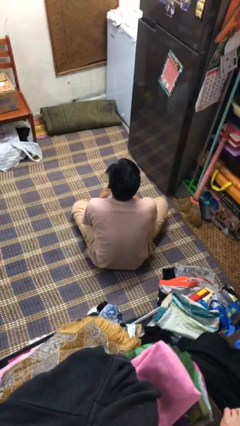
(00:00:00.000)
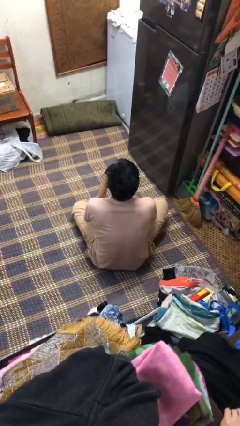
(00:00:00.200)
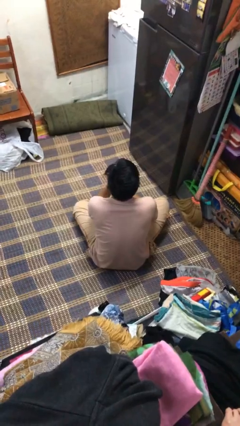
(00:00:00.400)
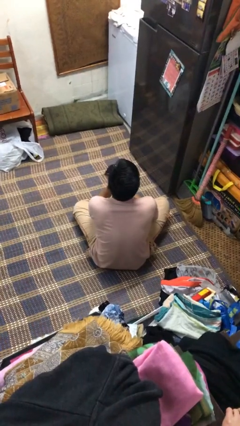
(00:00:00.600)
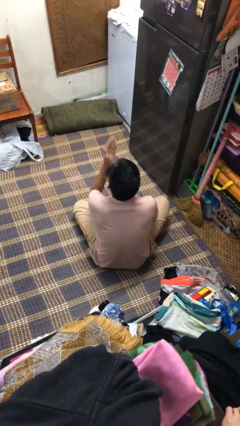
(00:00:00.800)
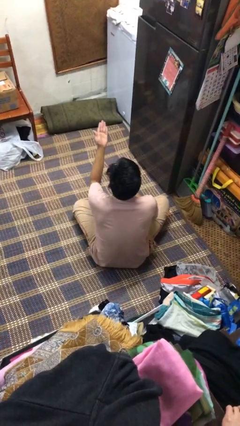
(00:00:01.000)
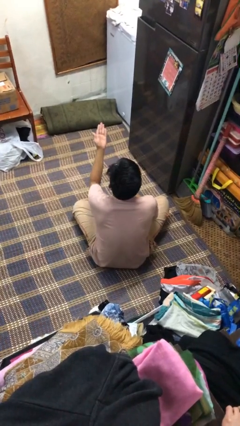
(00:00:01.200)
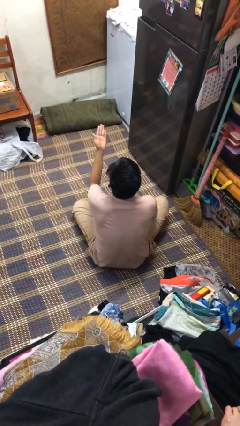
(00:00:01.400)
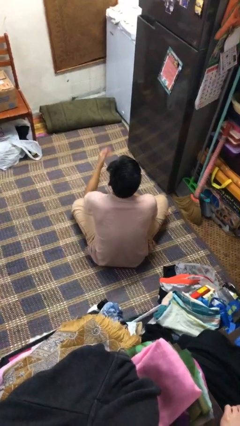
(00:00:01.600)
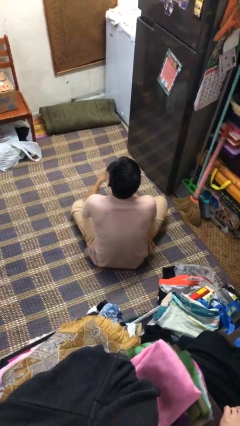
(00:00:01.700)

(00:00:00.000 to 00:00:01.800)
person gestures blow kiss

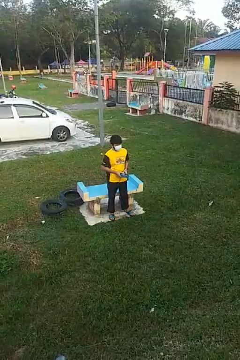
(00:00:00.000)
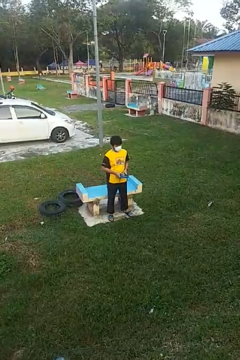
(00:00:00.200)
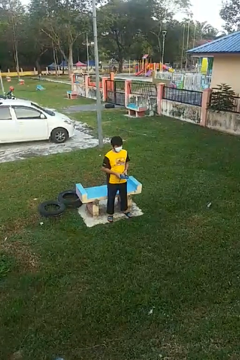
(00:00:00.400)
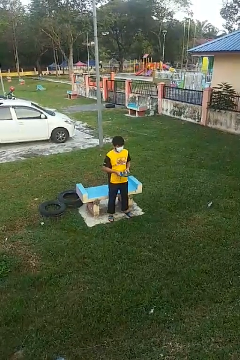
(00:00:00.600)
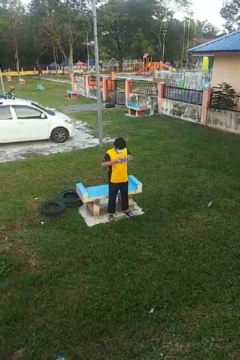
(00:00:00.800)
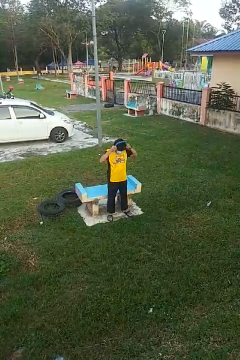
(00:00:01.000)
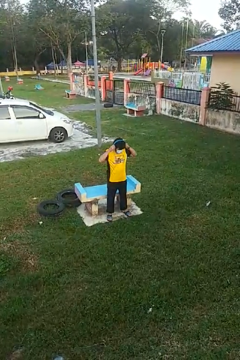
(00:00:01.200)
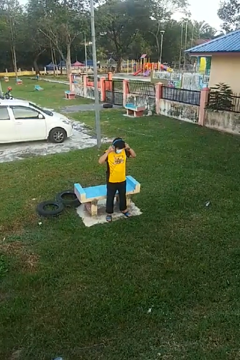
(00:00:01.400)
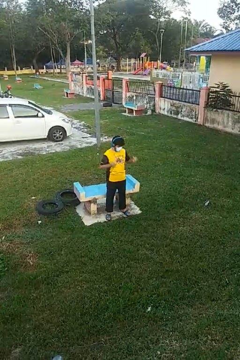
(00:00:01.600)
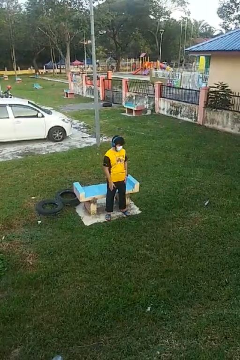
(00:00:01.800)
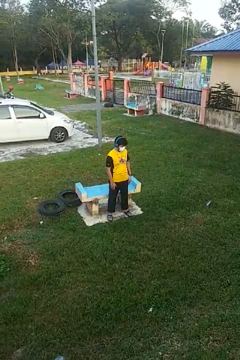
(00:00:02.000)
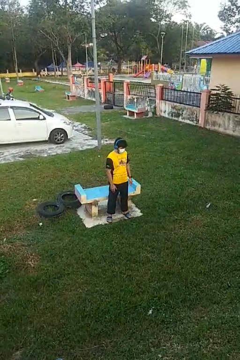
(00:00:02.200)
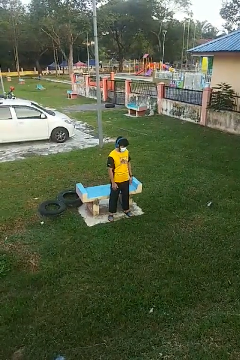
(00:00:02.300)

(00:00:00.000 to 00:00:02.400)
person puts on headphones

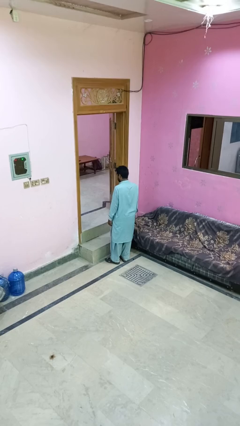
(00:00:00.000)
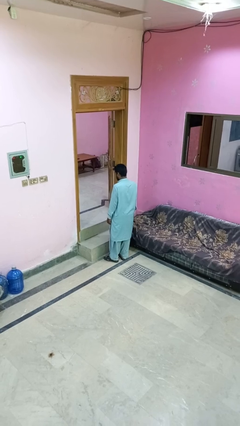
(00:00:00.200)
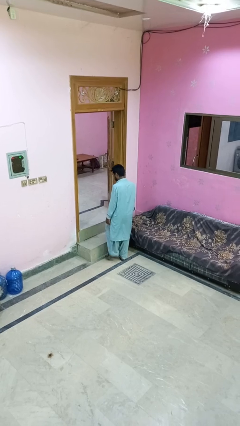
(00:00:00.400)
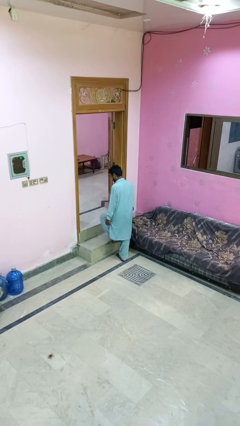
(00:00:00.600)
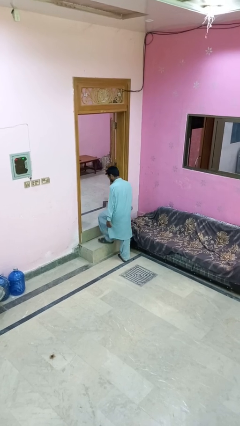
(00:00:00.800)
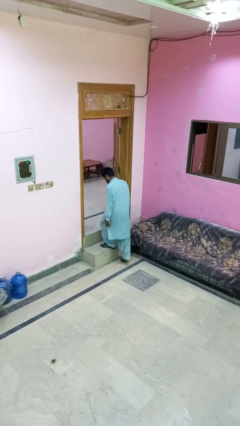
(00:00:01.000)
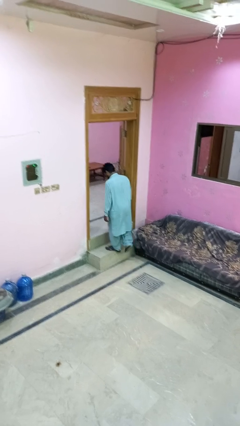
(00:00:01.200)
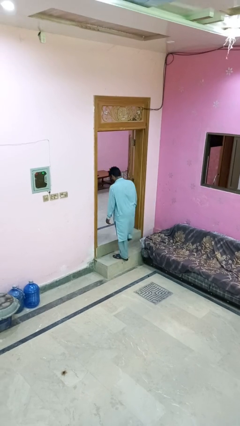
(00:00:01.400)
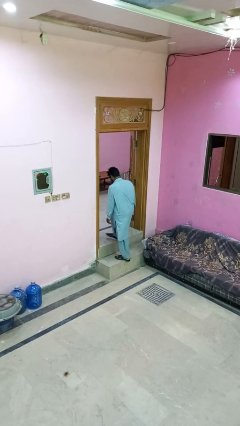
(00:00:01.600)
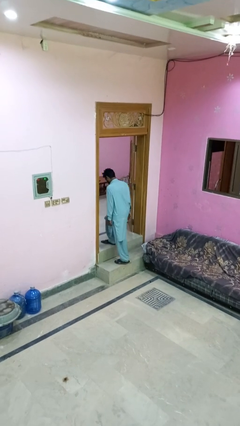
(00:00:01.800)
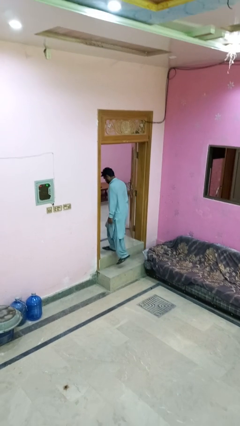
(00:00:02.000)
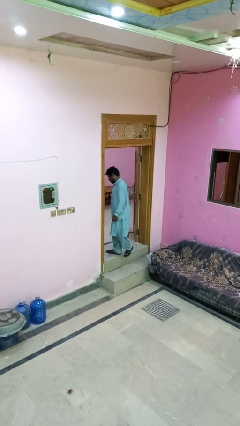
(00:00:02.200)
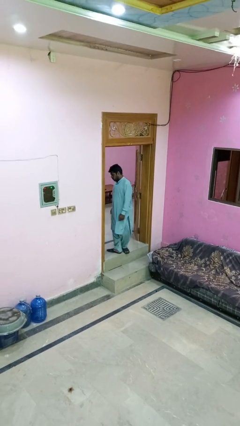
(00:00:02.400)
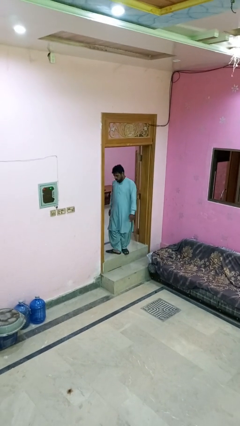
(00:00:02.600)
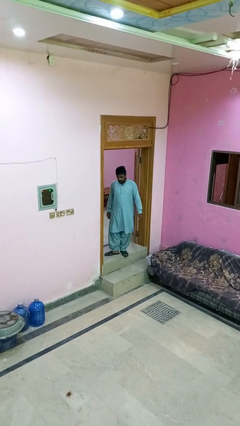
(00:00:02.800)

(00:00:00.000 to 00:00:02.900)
person climbs up stairs

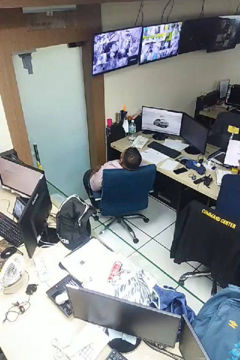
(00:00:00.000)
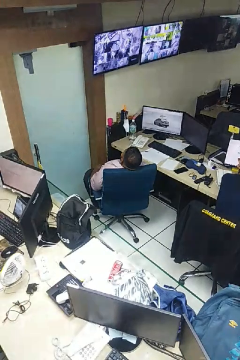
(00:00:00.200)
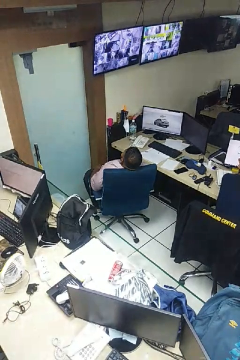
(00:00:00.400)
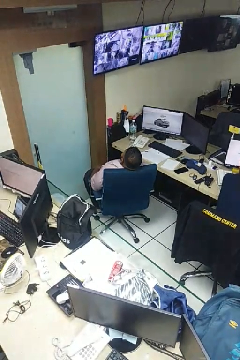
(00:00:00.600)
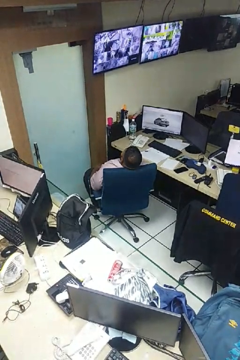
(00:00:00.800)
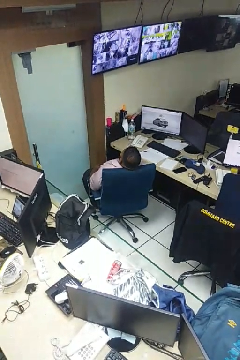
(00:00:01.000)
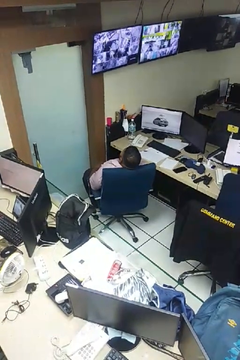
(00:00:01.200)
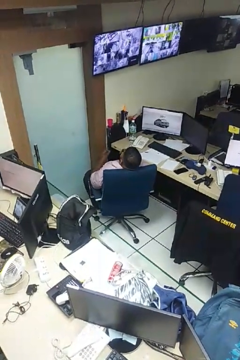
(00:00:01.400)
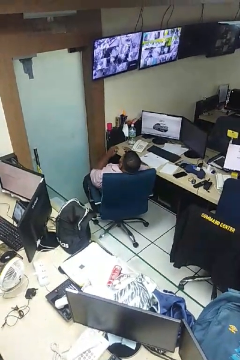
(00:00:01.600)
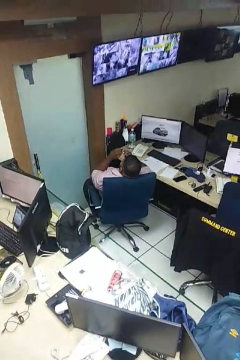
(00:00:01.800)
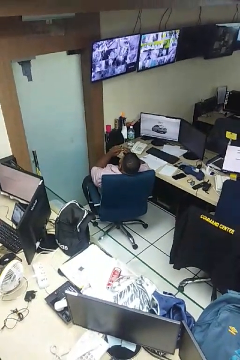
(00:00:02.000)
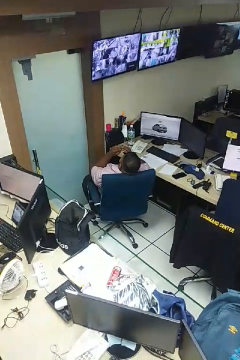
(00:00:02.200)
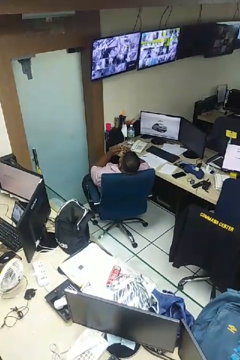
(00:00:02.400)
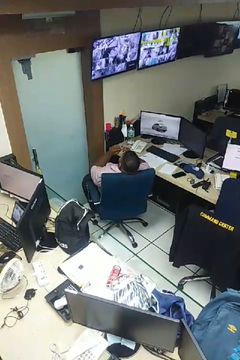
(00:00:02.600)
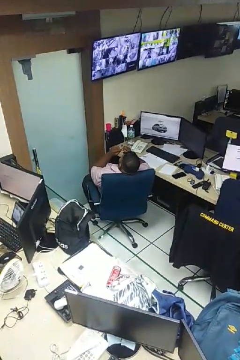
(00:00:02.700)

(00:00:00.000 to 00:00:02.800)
person files fingernails

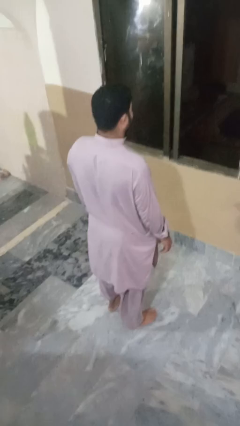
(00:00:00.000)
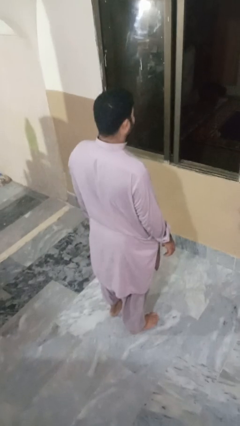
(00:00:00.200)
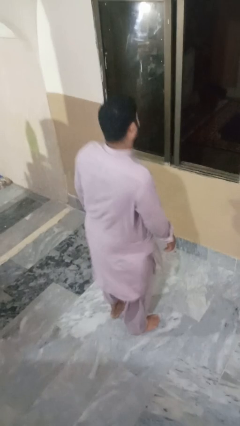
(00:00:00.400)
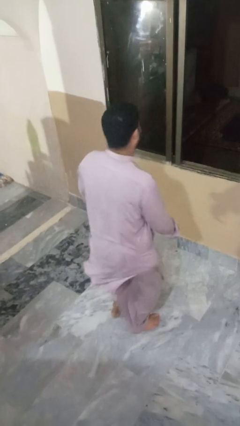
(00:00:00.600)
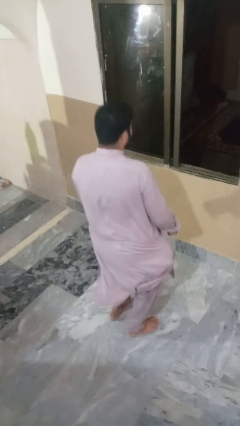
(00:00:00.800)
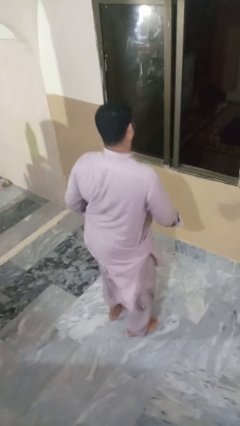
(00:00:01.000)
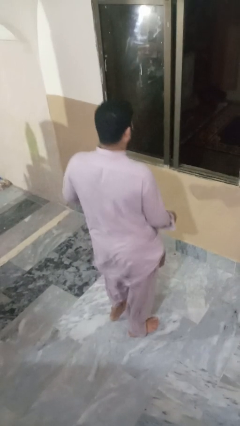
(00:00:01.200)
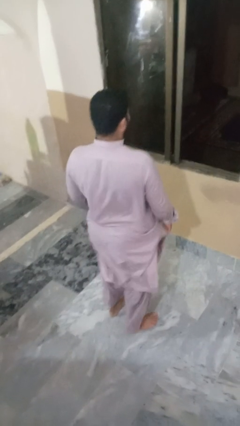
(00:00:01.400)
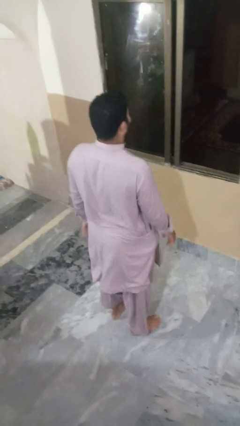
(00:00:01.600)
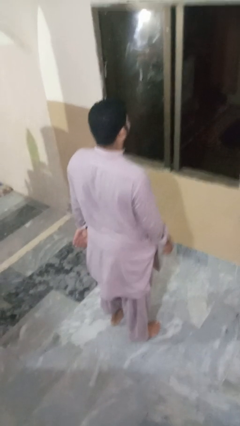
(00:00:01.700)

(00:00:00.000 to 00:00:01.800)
person wiggles hips

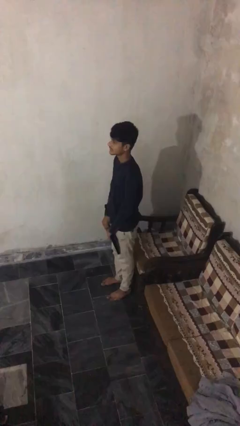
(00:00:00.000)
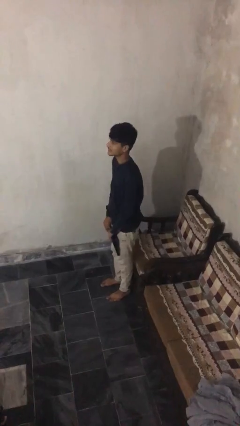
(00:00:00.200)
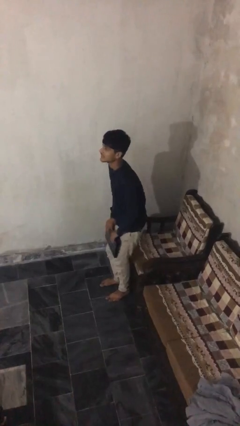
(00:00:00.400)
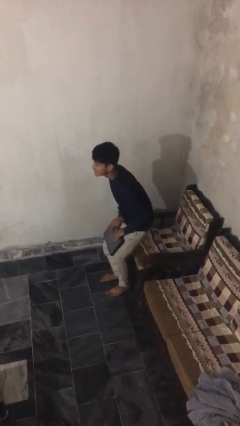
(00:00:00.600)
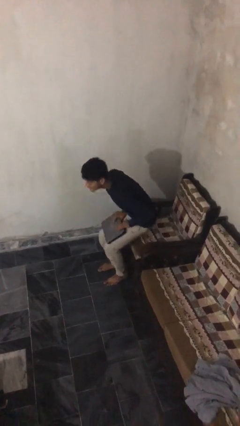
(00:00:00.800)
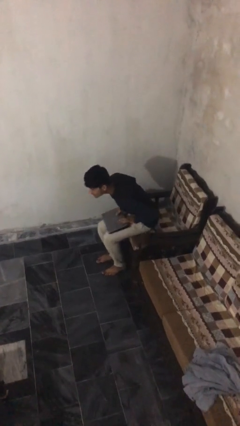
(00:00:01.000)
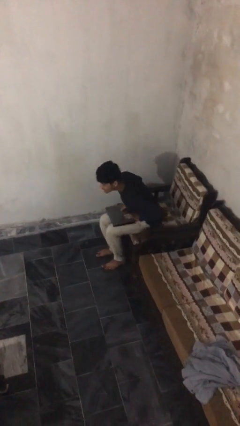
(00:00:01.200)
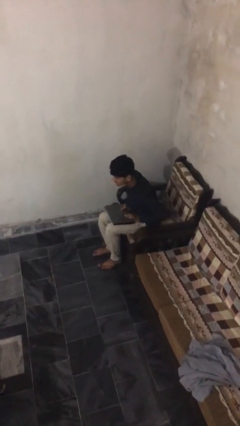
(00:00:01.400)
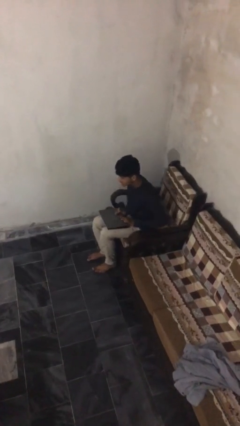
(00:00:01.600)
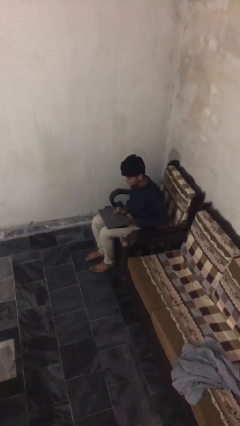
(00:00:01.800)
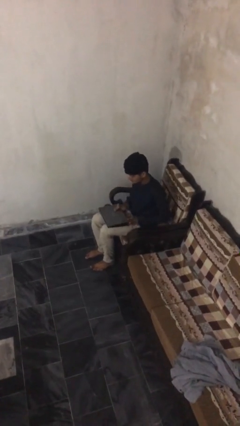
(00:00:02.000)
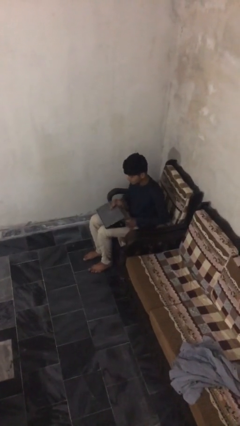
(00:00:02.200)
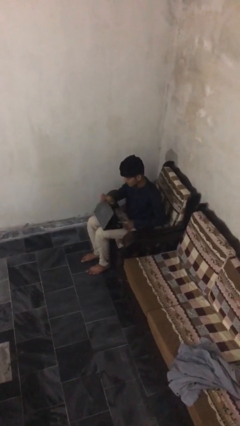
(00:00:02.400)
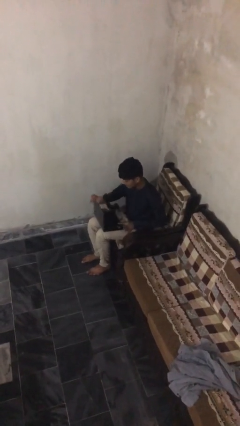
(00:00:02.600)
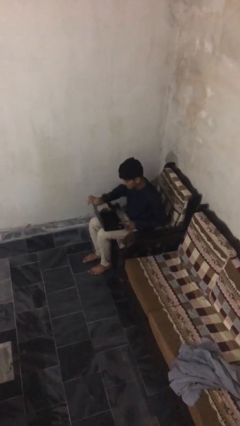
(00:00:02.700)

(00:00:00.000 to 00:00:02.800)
person sits down

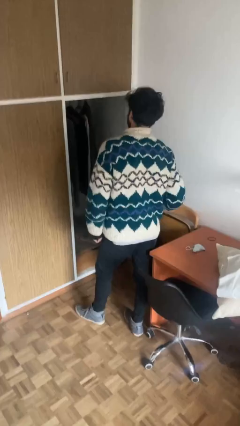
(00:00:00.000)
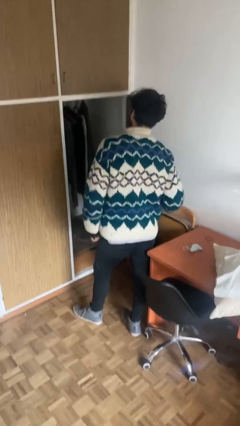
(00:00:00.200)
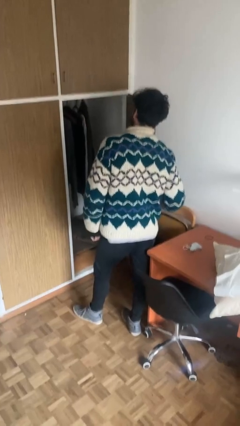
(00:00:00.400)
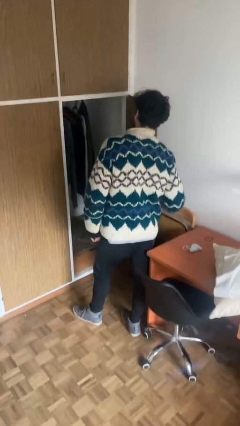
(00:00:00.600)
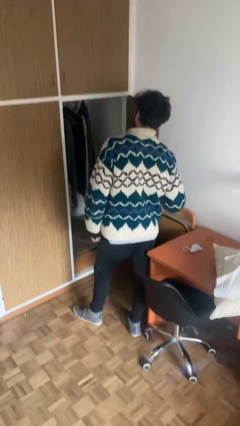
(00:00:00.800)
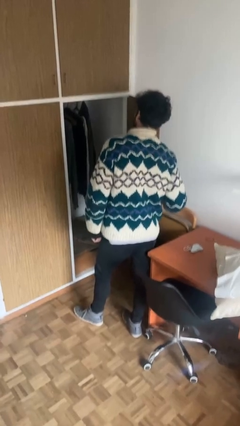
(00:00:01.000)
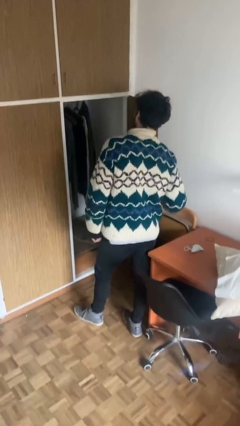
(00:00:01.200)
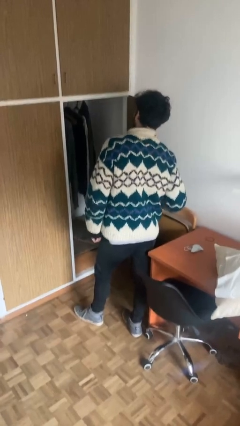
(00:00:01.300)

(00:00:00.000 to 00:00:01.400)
person opens closet door

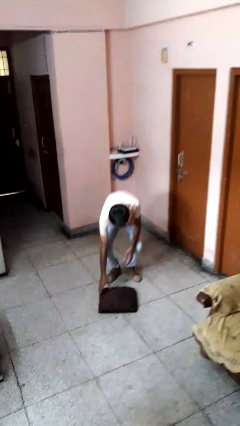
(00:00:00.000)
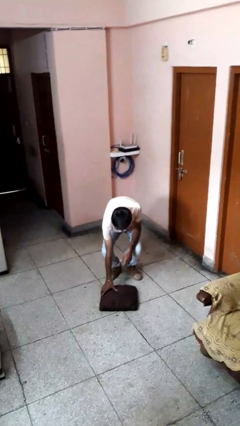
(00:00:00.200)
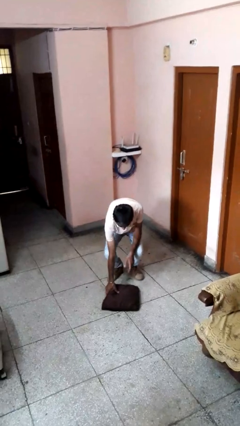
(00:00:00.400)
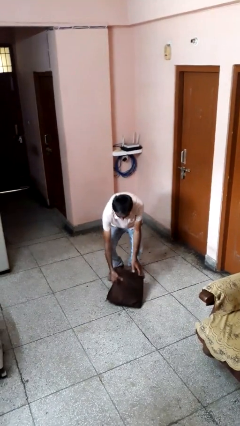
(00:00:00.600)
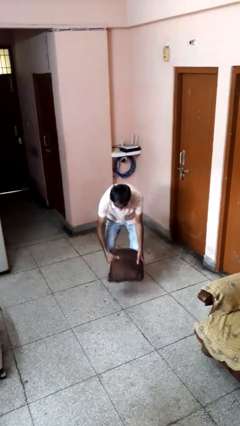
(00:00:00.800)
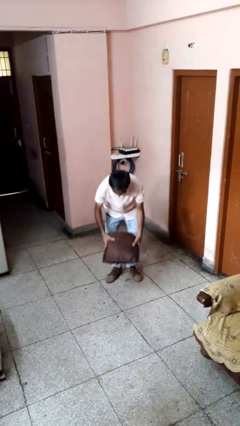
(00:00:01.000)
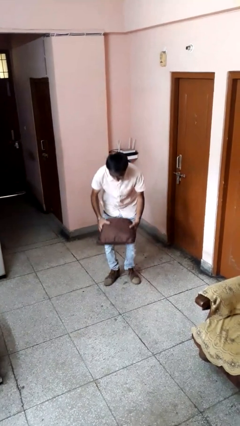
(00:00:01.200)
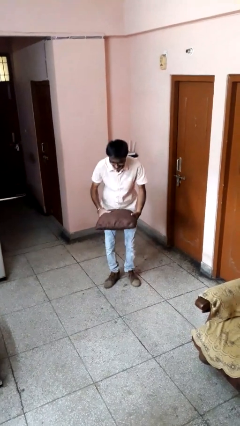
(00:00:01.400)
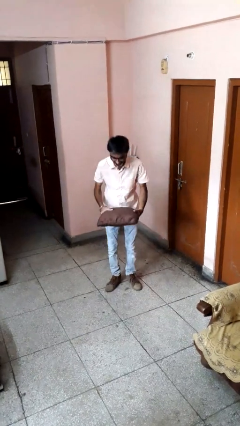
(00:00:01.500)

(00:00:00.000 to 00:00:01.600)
person picks up object from floor
